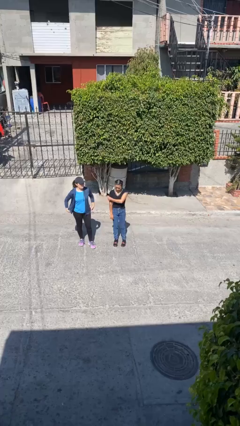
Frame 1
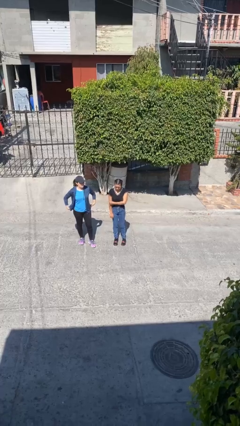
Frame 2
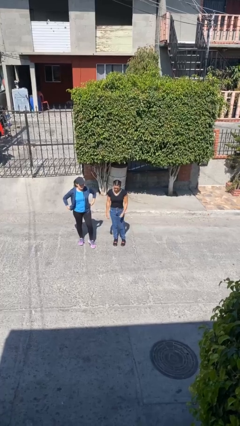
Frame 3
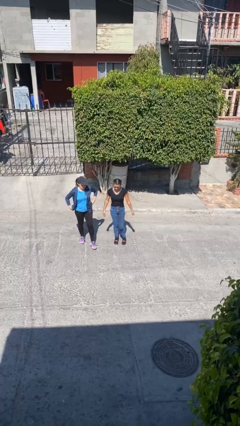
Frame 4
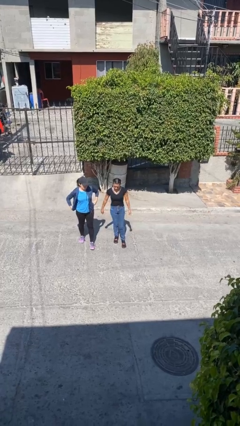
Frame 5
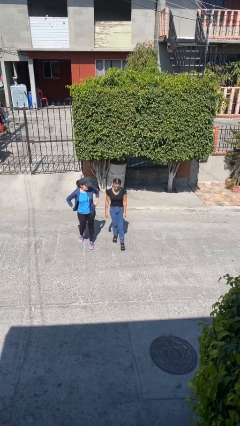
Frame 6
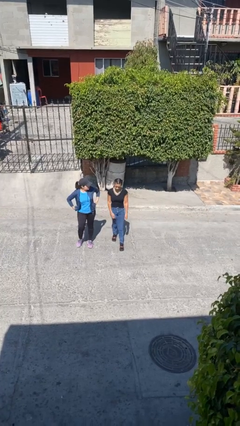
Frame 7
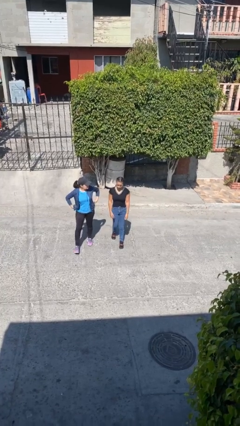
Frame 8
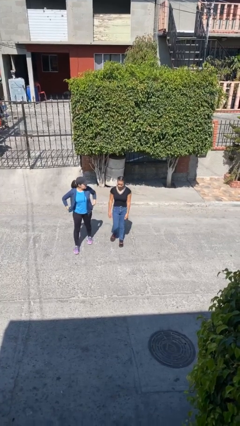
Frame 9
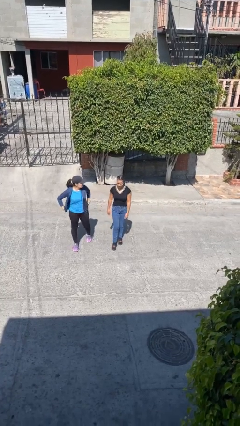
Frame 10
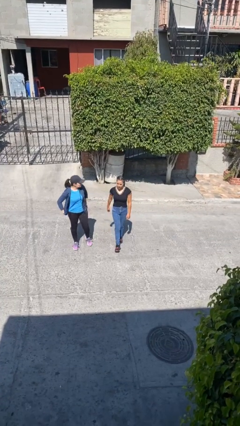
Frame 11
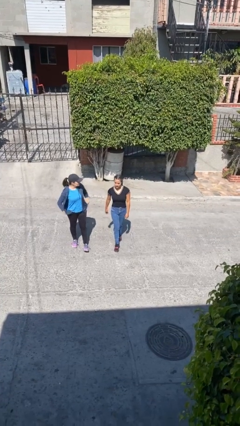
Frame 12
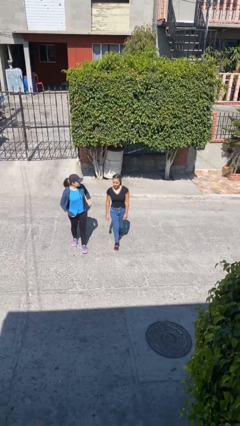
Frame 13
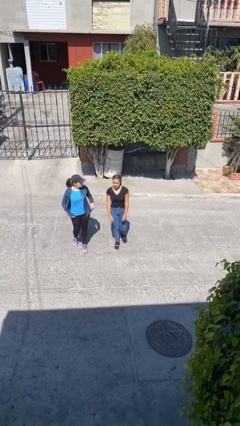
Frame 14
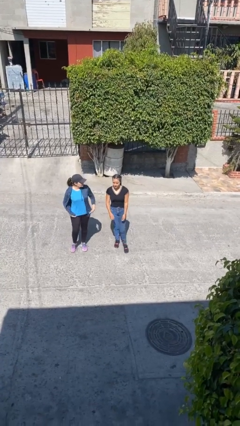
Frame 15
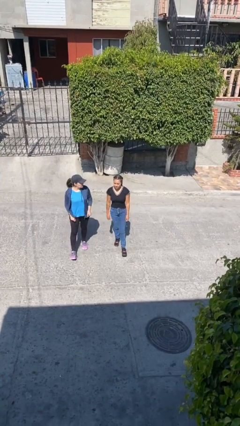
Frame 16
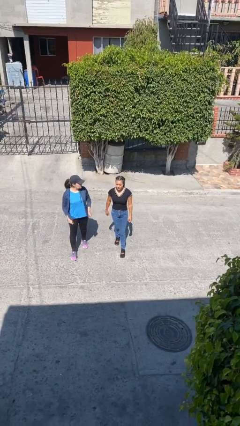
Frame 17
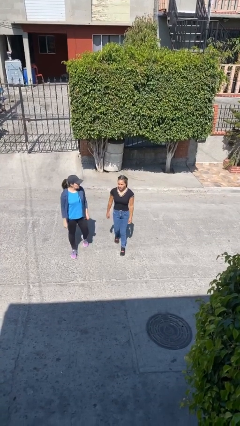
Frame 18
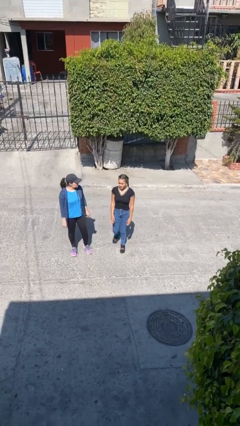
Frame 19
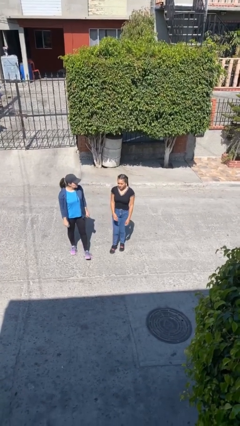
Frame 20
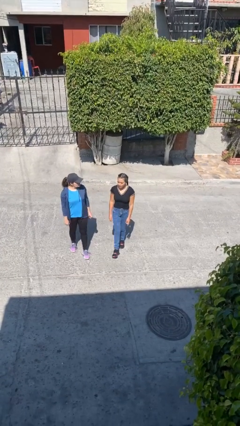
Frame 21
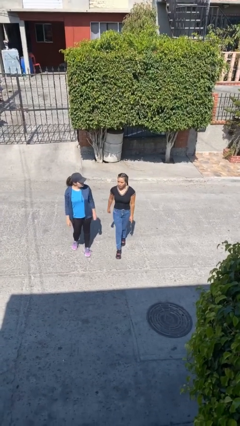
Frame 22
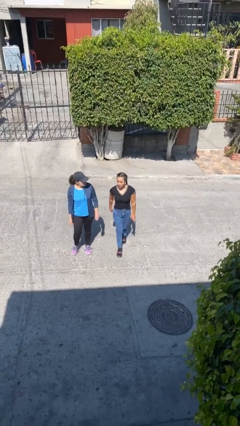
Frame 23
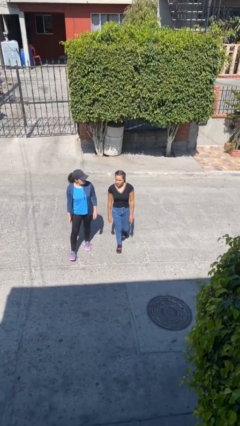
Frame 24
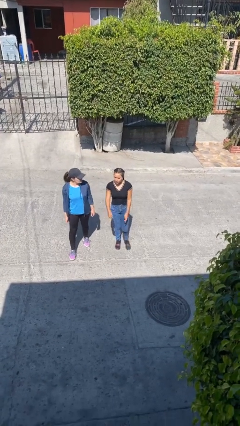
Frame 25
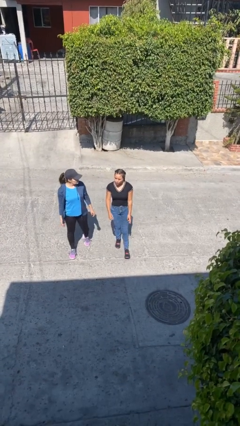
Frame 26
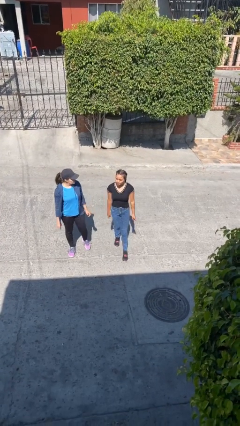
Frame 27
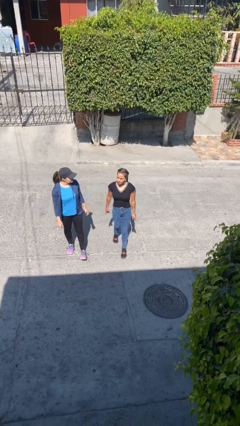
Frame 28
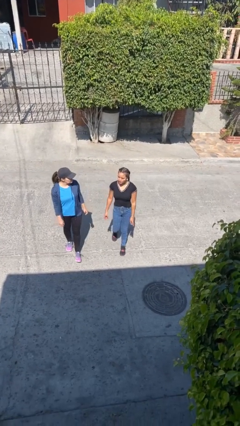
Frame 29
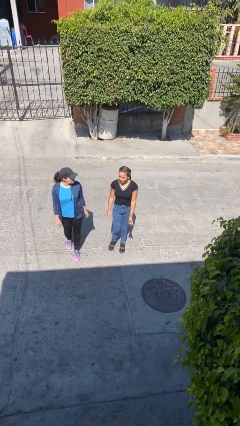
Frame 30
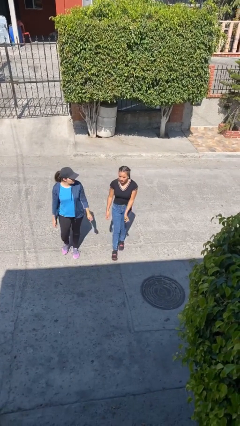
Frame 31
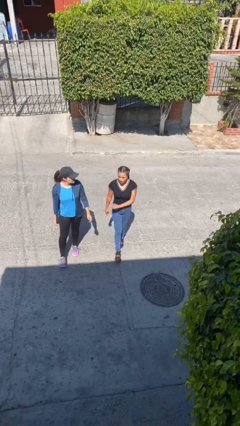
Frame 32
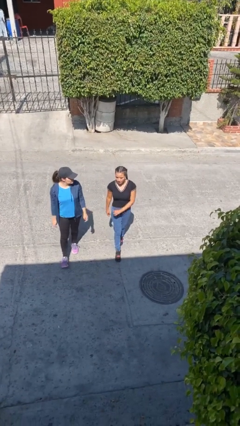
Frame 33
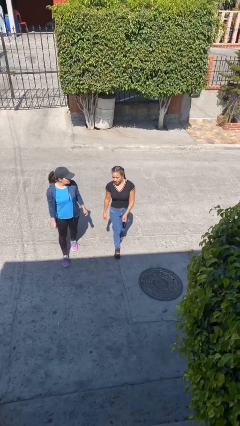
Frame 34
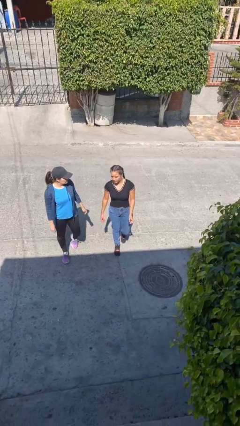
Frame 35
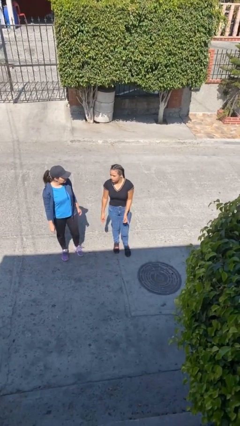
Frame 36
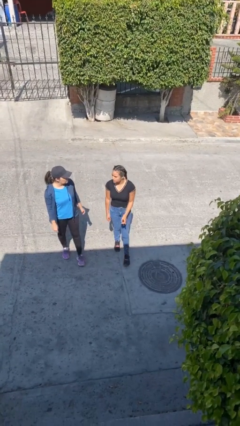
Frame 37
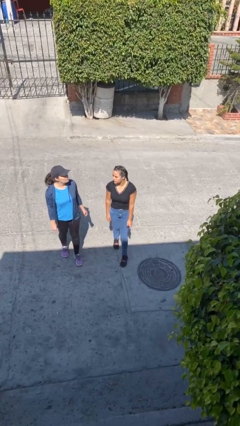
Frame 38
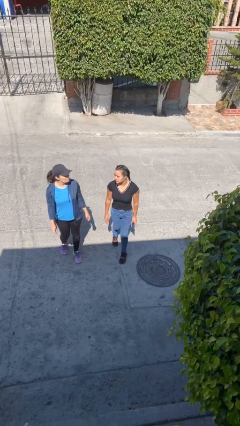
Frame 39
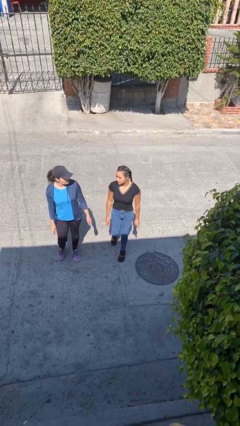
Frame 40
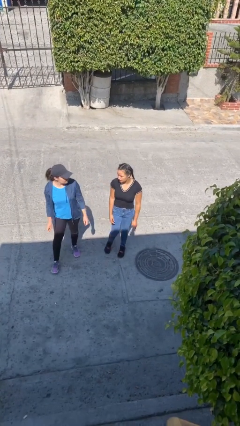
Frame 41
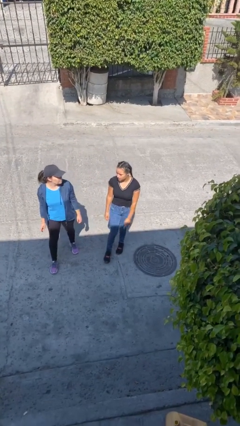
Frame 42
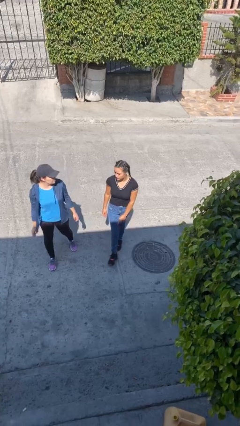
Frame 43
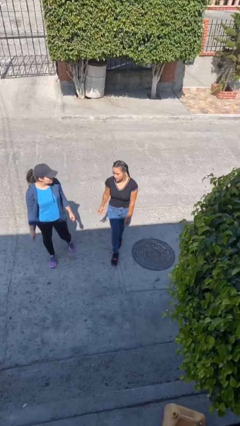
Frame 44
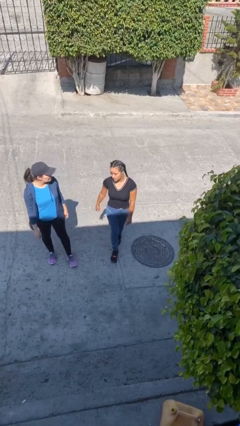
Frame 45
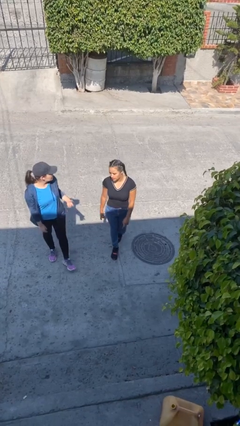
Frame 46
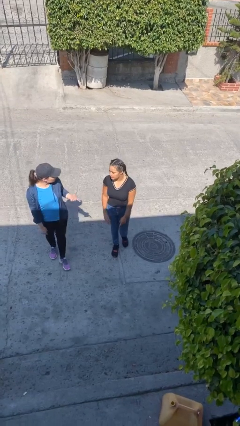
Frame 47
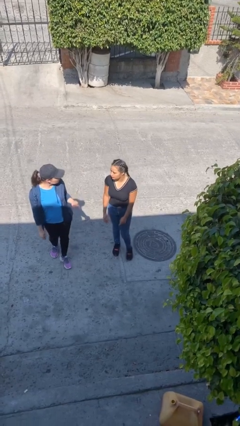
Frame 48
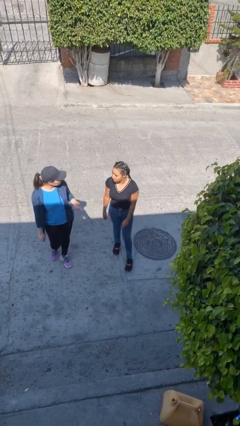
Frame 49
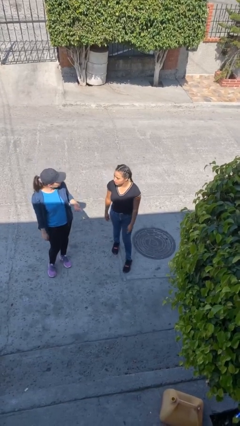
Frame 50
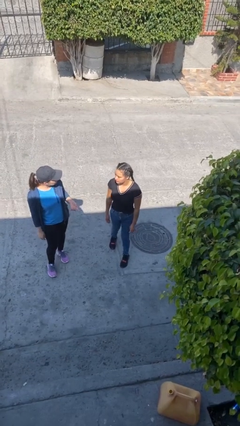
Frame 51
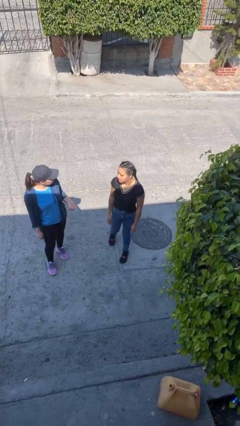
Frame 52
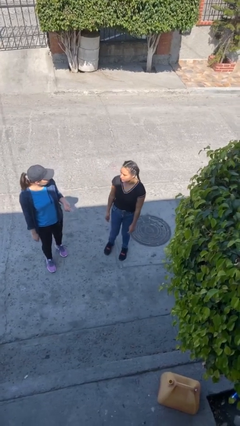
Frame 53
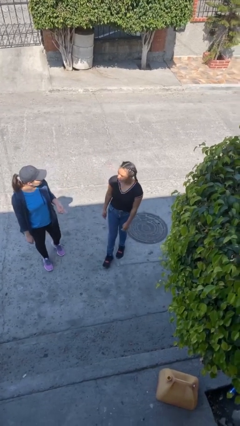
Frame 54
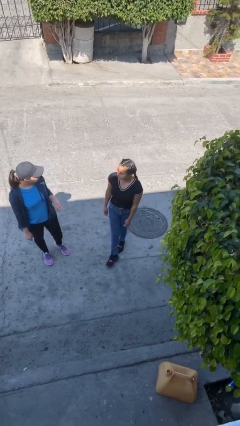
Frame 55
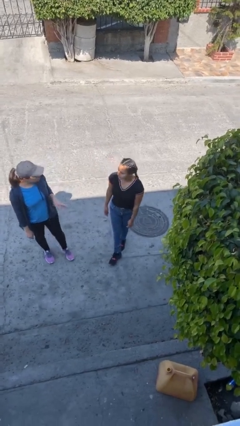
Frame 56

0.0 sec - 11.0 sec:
person talks to person

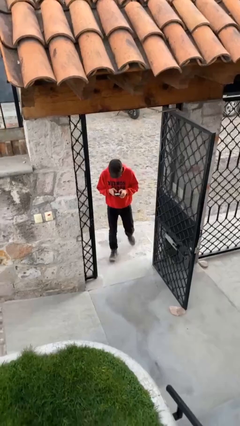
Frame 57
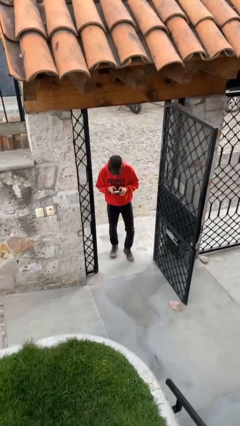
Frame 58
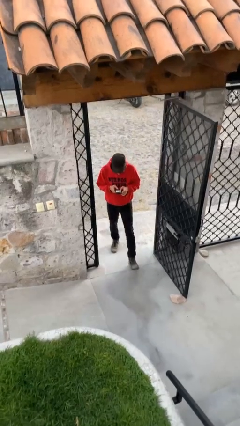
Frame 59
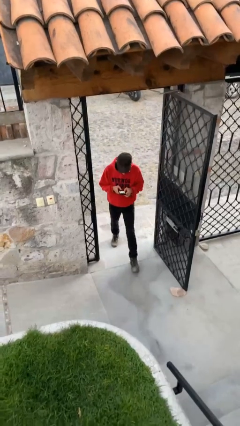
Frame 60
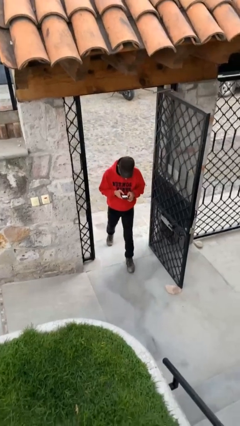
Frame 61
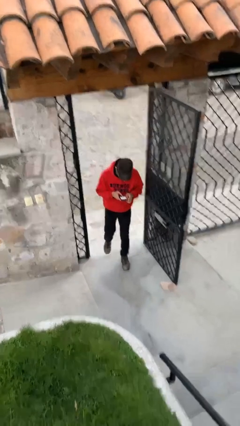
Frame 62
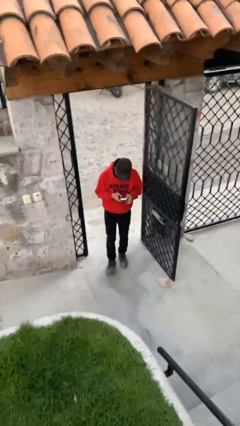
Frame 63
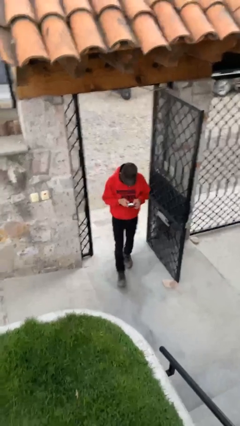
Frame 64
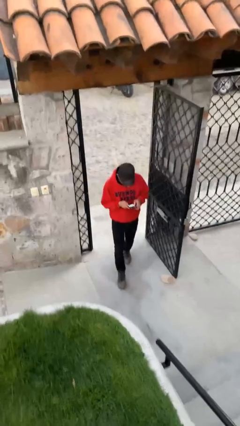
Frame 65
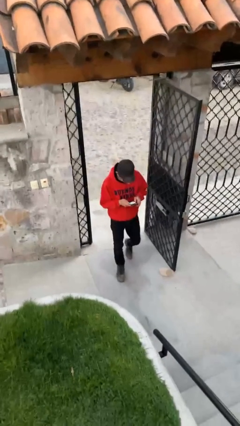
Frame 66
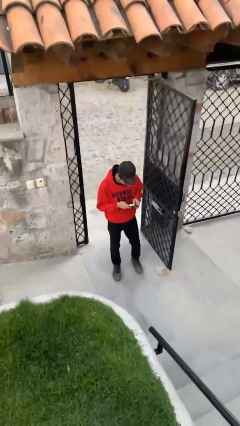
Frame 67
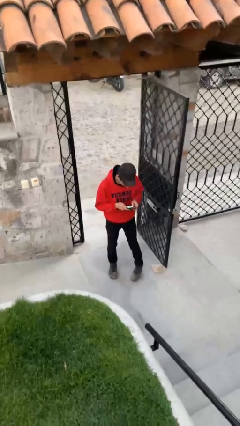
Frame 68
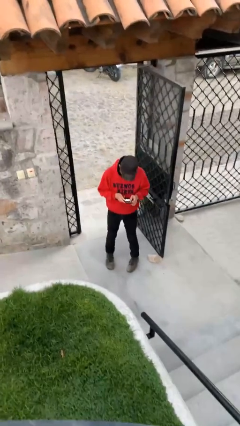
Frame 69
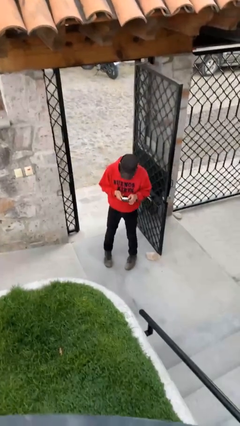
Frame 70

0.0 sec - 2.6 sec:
person enters scene through structure

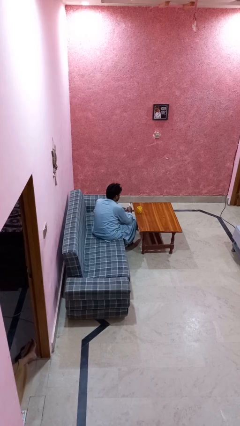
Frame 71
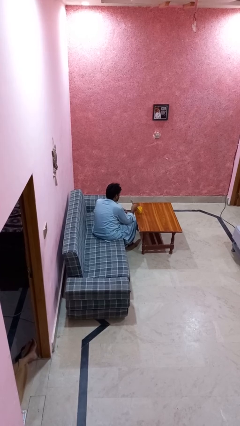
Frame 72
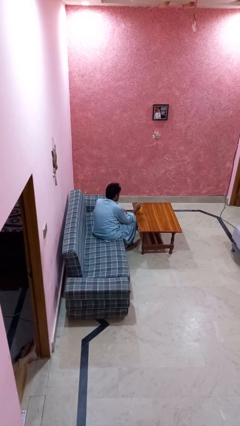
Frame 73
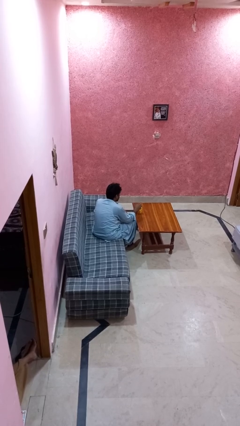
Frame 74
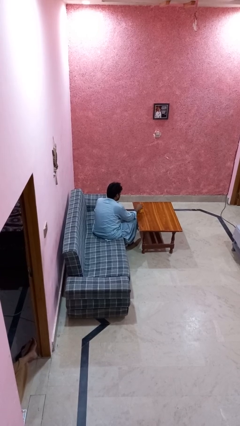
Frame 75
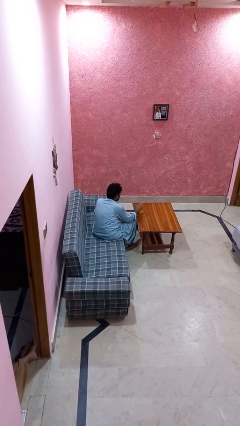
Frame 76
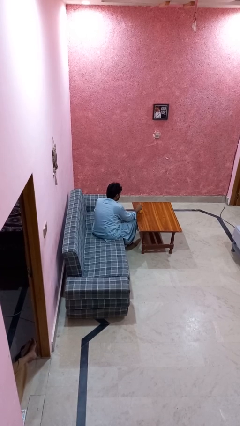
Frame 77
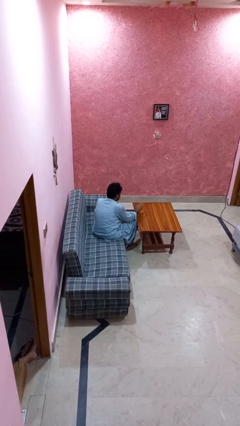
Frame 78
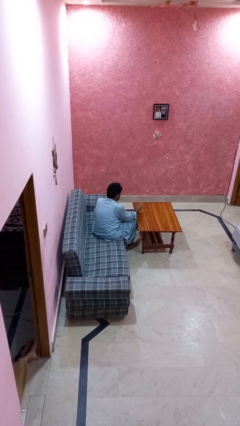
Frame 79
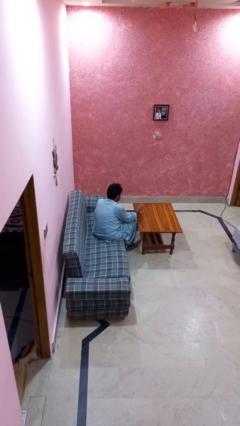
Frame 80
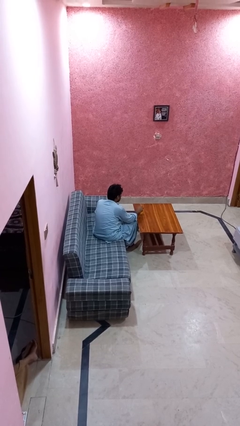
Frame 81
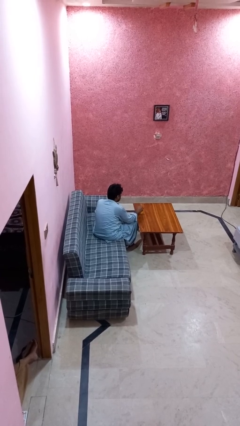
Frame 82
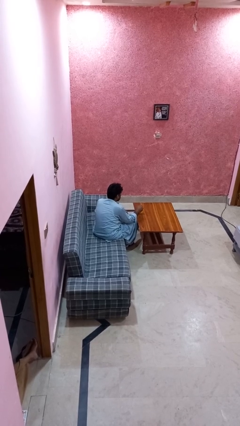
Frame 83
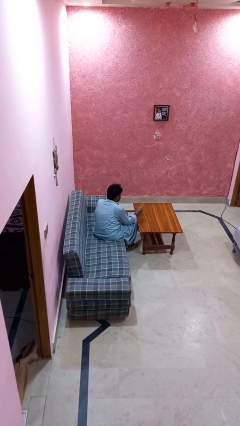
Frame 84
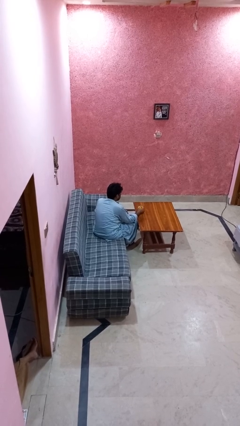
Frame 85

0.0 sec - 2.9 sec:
person stirs mug

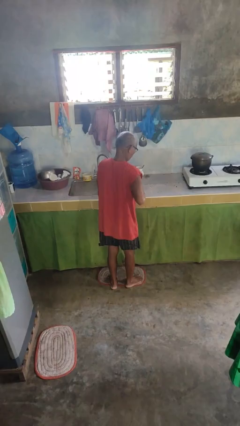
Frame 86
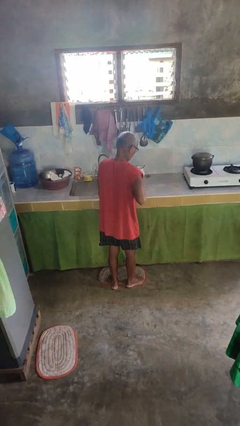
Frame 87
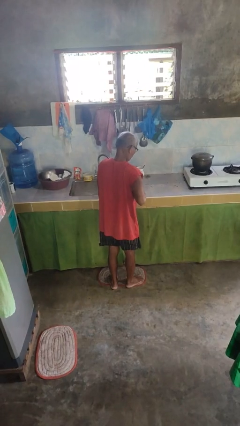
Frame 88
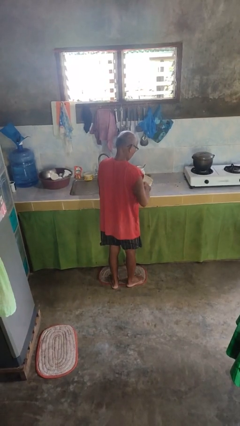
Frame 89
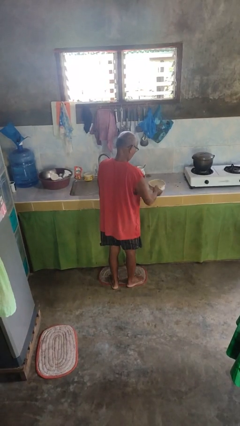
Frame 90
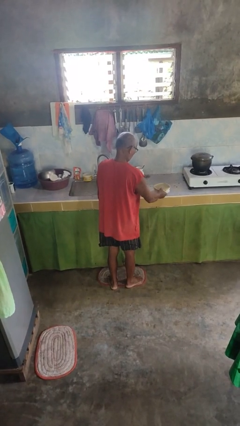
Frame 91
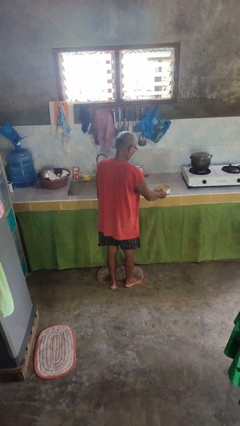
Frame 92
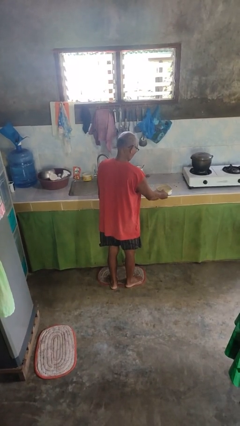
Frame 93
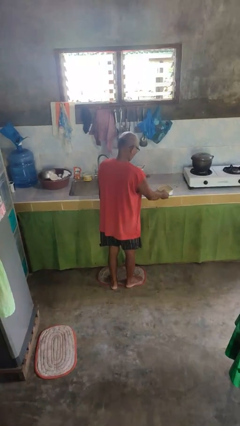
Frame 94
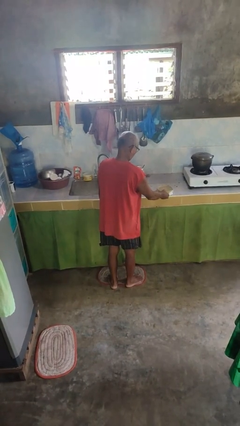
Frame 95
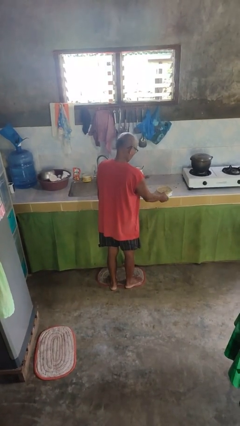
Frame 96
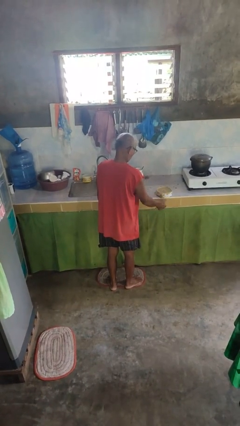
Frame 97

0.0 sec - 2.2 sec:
person puts down object on countertop
